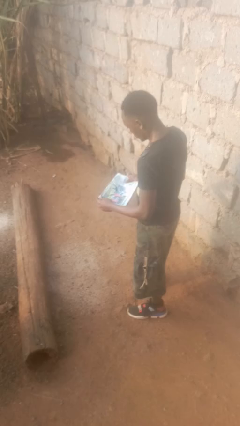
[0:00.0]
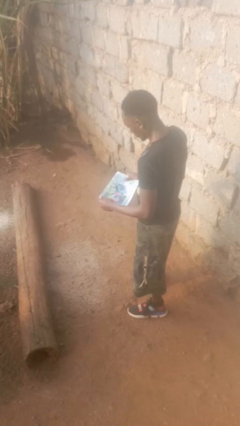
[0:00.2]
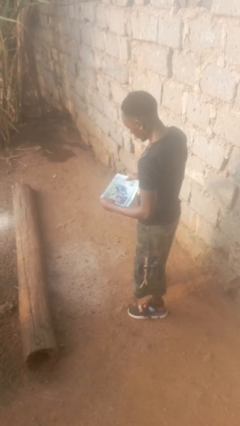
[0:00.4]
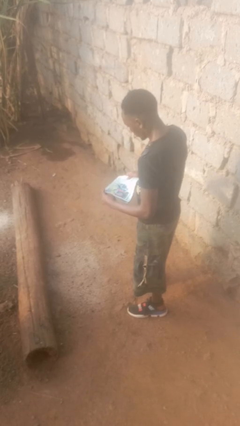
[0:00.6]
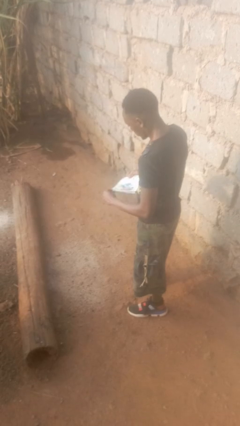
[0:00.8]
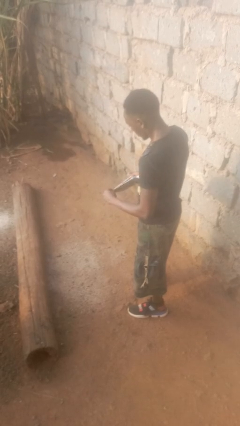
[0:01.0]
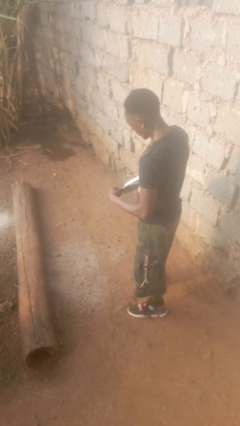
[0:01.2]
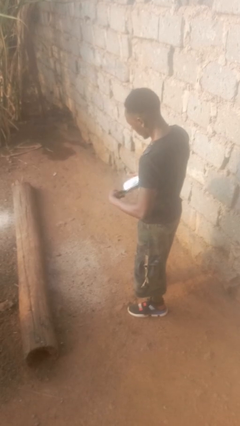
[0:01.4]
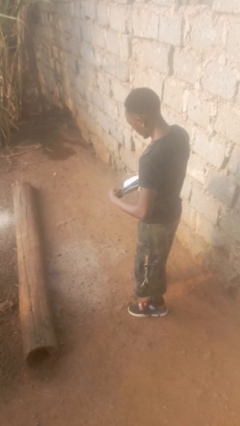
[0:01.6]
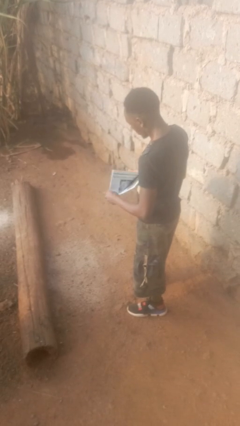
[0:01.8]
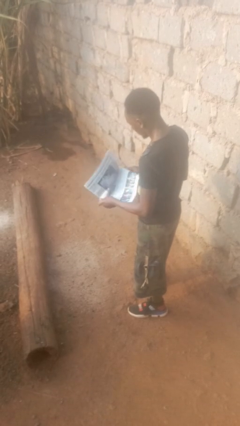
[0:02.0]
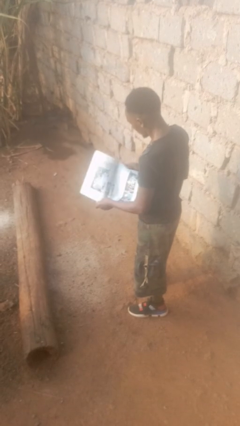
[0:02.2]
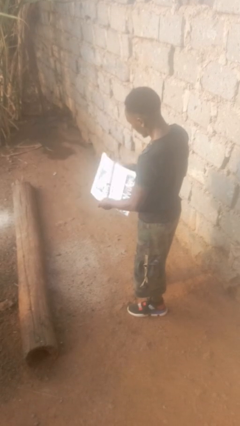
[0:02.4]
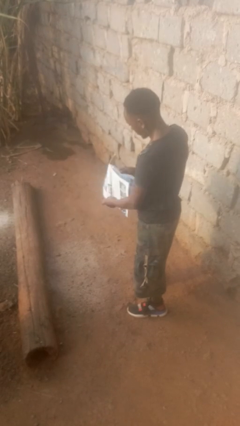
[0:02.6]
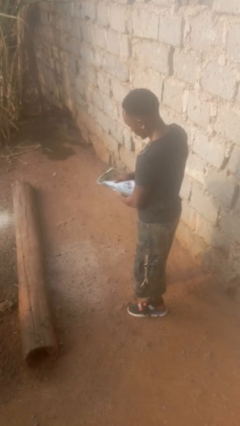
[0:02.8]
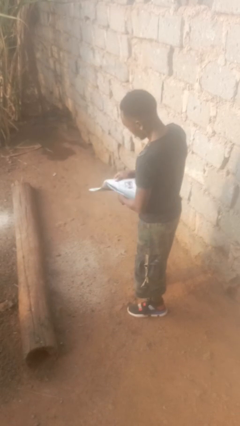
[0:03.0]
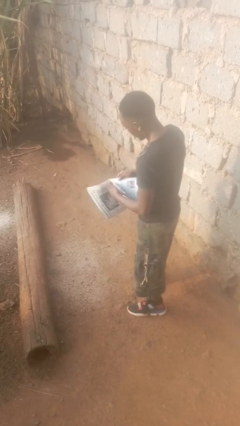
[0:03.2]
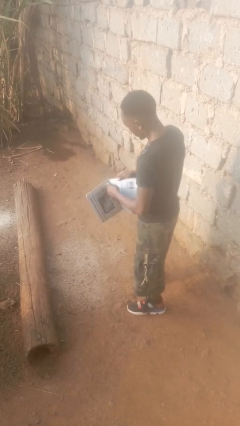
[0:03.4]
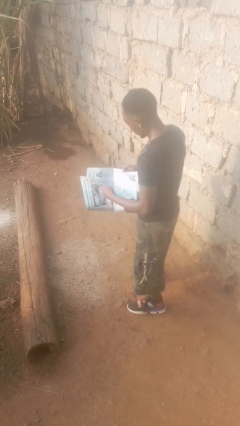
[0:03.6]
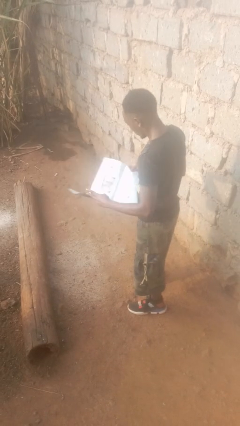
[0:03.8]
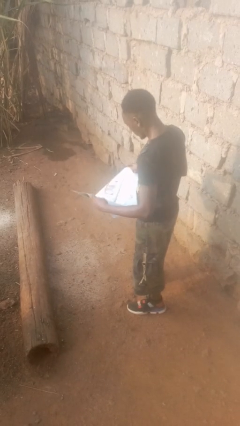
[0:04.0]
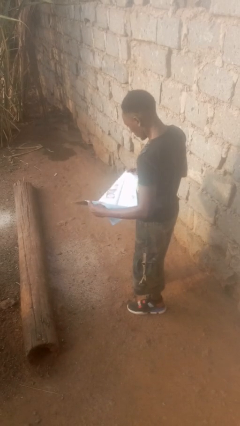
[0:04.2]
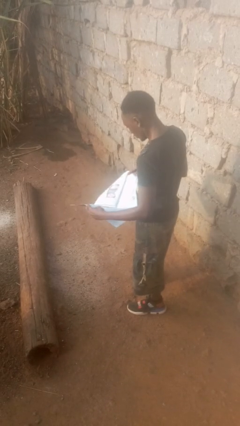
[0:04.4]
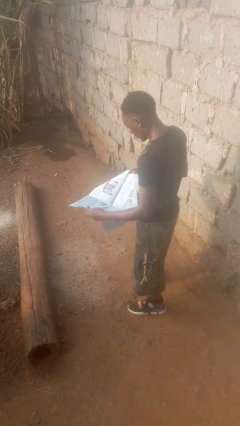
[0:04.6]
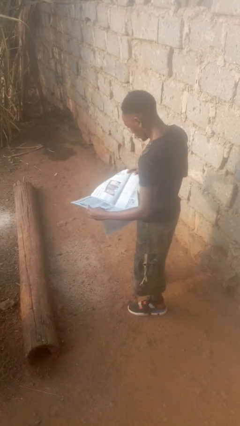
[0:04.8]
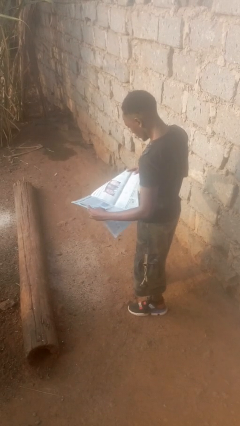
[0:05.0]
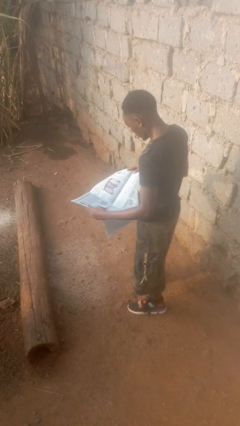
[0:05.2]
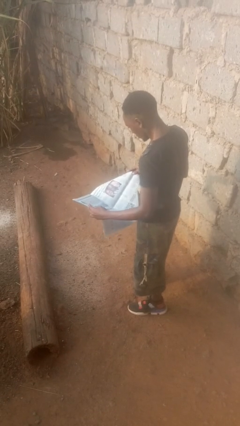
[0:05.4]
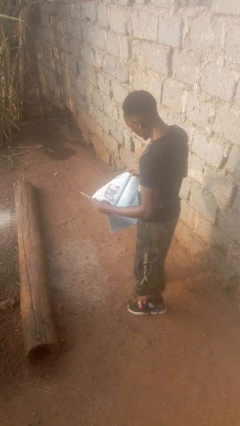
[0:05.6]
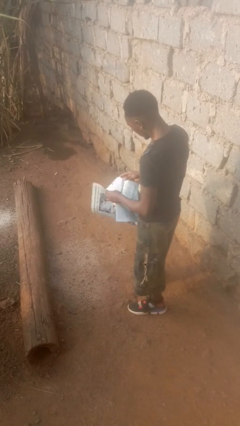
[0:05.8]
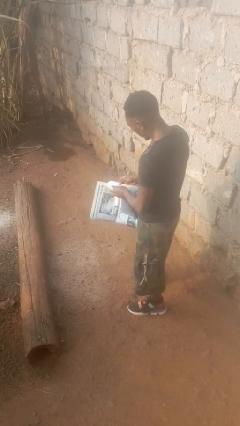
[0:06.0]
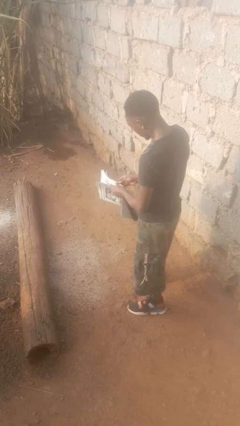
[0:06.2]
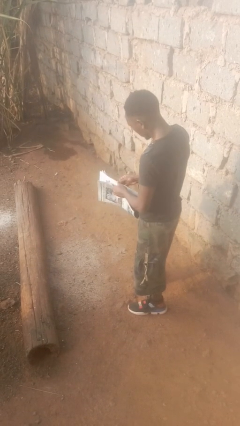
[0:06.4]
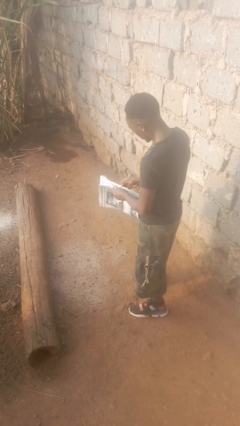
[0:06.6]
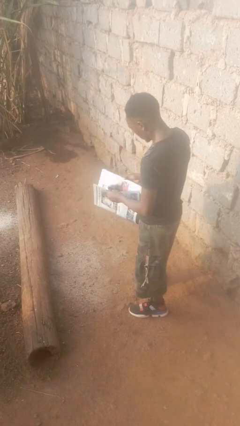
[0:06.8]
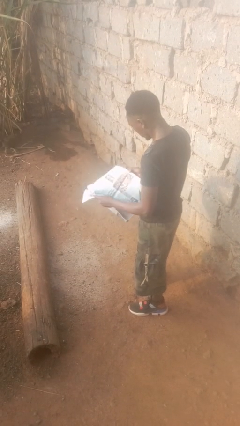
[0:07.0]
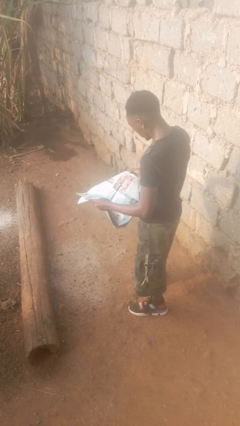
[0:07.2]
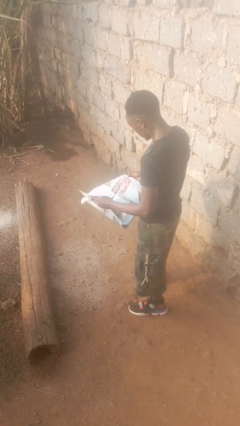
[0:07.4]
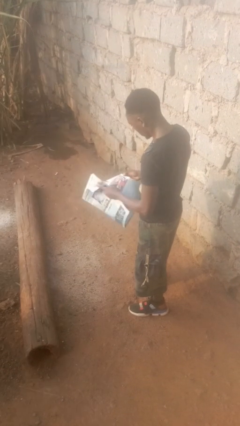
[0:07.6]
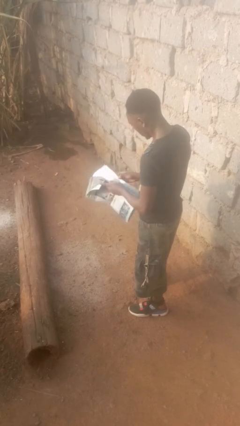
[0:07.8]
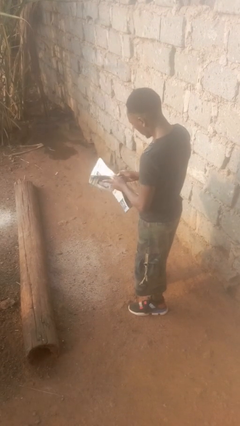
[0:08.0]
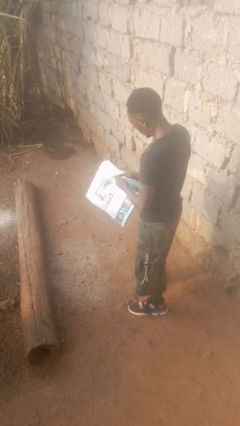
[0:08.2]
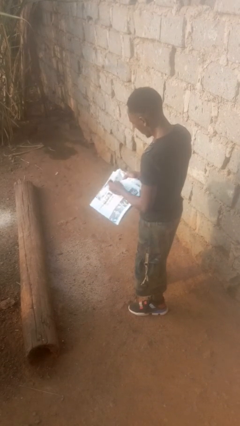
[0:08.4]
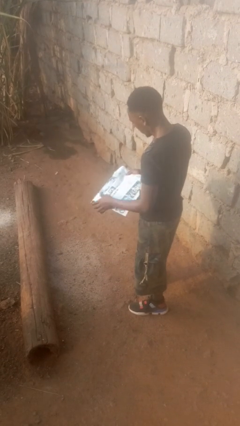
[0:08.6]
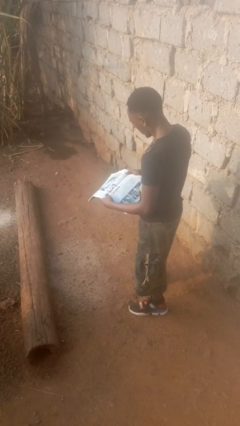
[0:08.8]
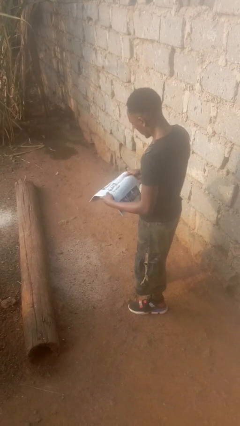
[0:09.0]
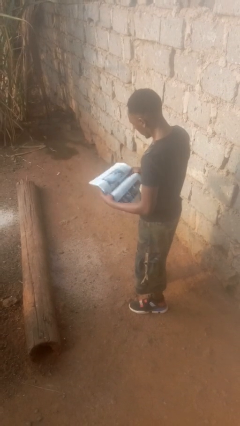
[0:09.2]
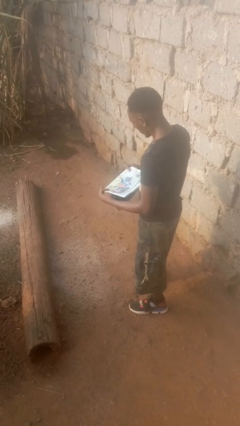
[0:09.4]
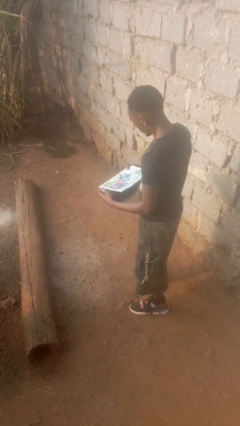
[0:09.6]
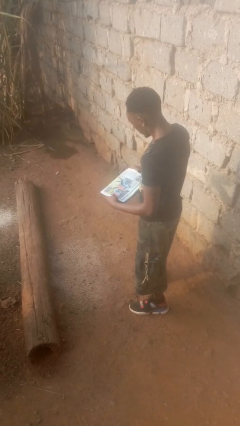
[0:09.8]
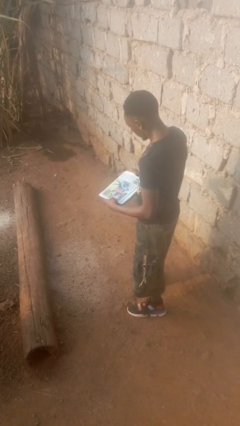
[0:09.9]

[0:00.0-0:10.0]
person reads newspaper

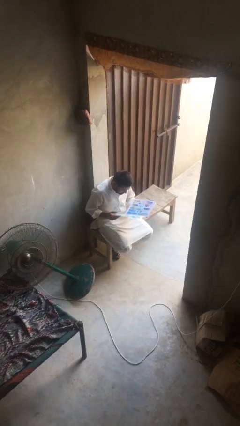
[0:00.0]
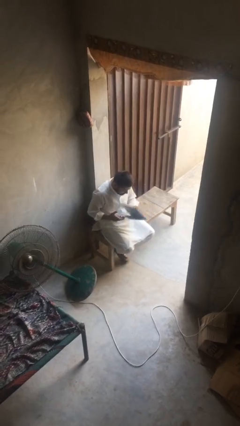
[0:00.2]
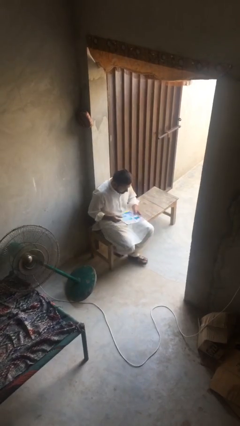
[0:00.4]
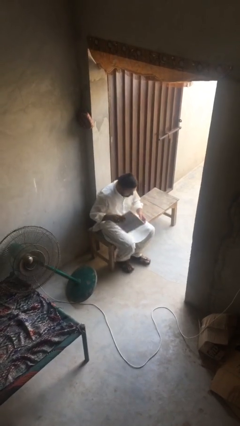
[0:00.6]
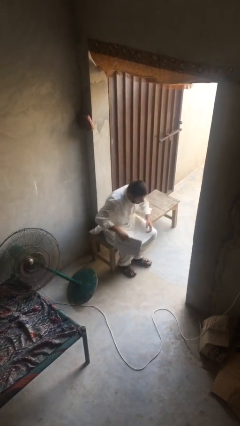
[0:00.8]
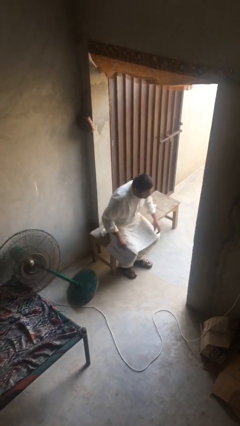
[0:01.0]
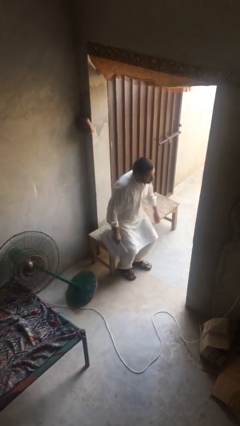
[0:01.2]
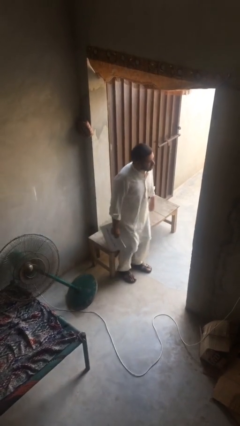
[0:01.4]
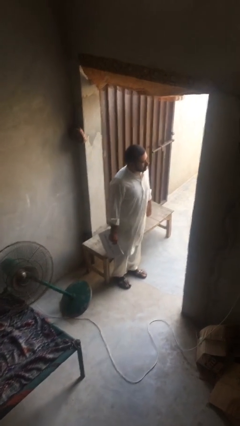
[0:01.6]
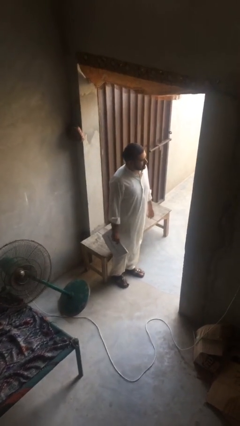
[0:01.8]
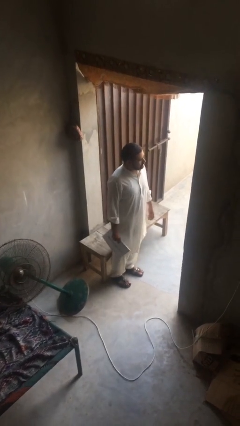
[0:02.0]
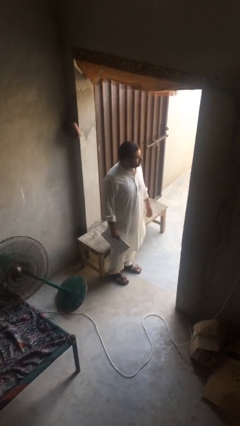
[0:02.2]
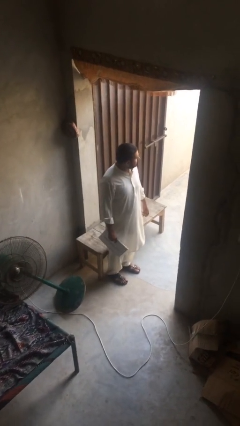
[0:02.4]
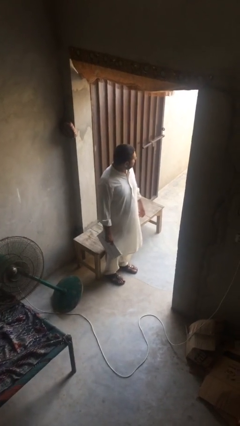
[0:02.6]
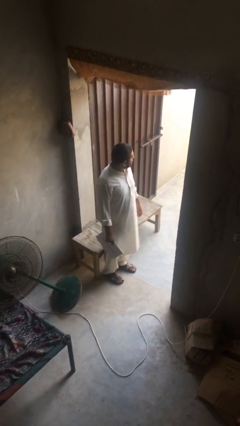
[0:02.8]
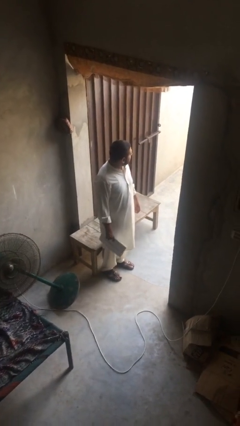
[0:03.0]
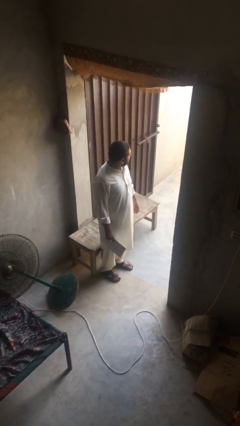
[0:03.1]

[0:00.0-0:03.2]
person stands up

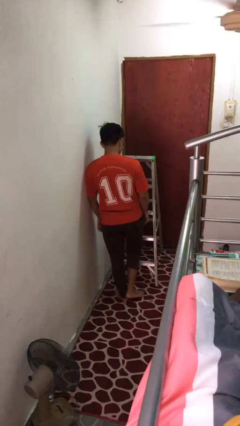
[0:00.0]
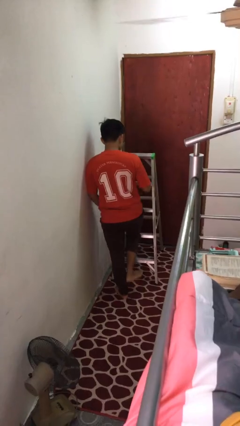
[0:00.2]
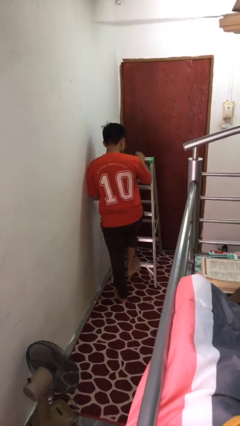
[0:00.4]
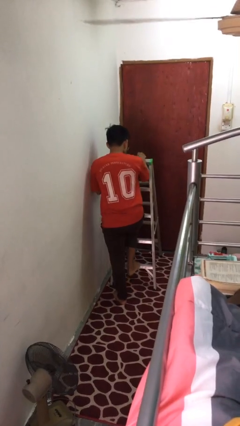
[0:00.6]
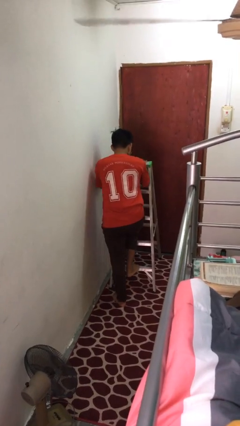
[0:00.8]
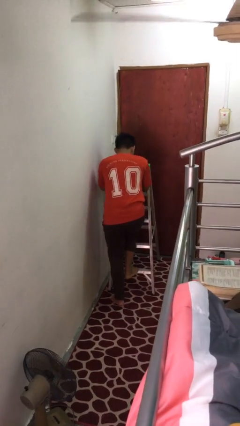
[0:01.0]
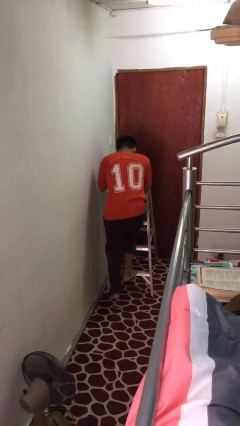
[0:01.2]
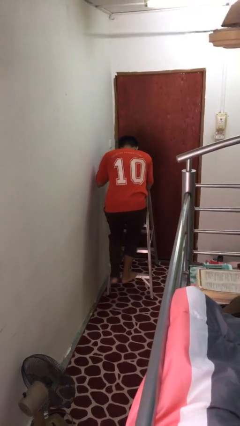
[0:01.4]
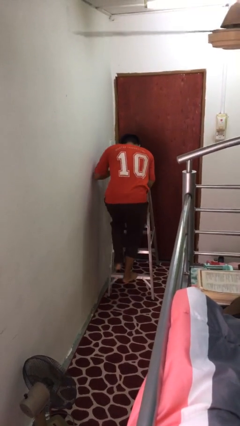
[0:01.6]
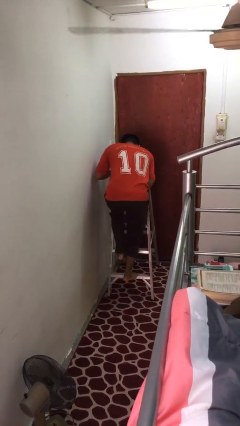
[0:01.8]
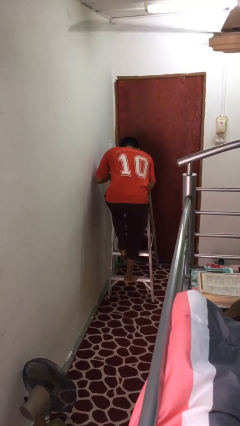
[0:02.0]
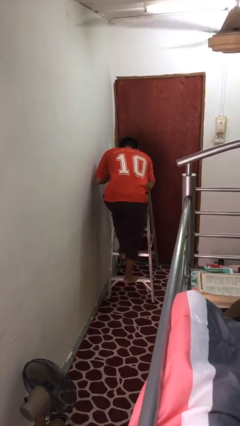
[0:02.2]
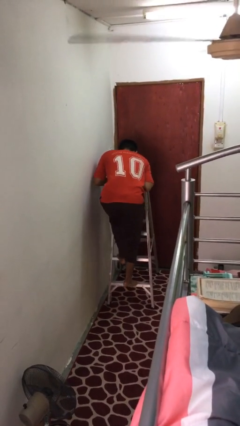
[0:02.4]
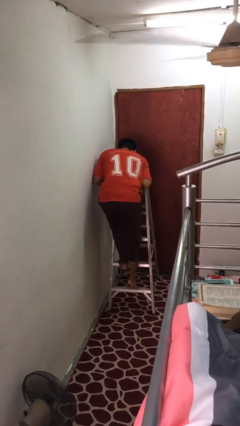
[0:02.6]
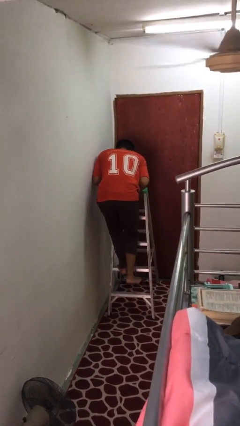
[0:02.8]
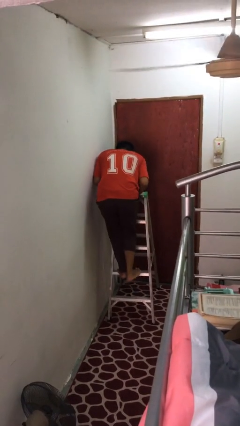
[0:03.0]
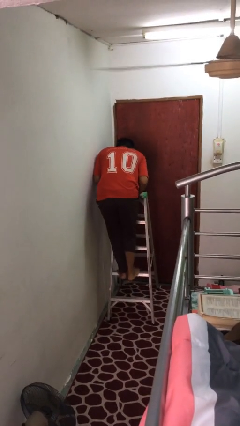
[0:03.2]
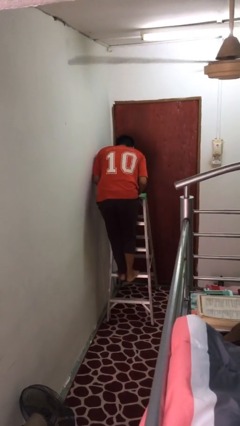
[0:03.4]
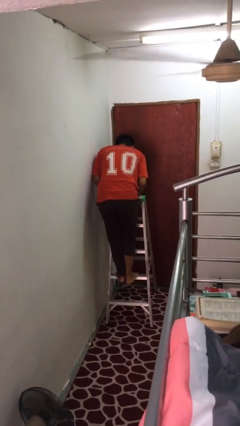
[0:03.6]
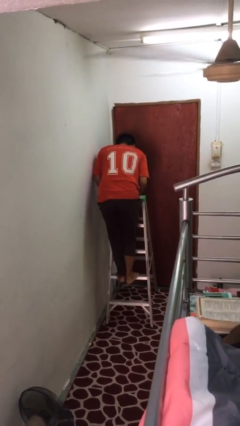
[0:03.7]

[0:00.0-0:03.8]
person climbs up ladder

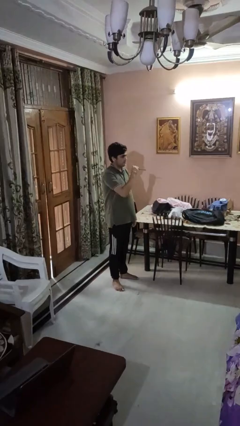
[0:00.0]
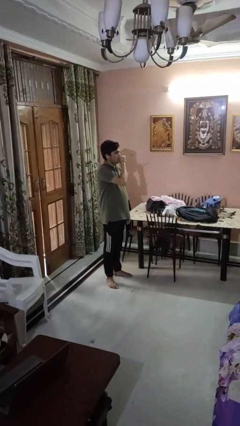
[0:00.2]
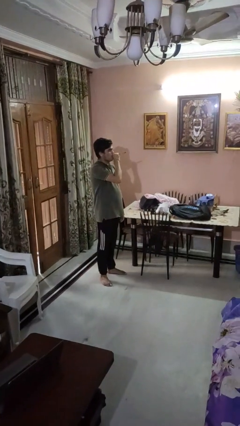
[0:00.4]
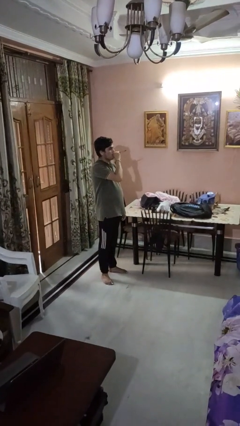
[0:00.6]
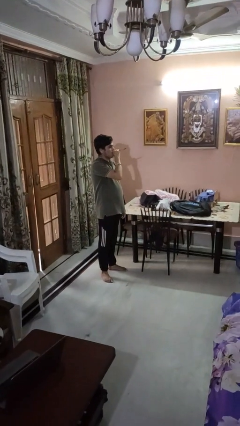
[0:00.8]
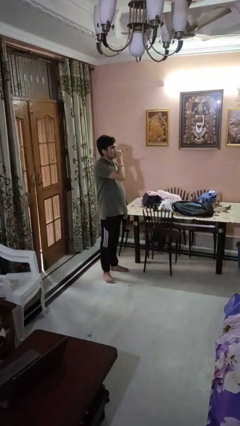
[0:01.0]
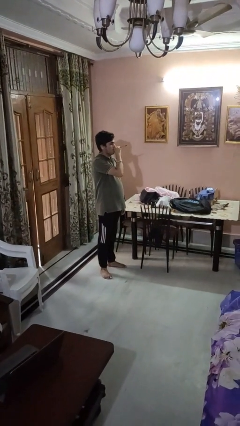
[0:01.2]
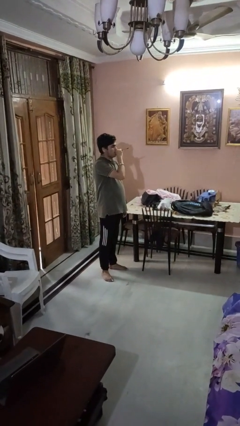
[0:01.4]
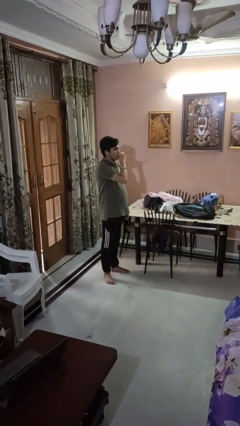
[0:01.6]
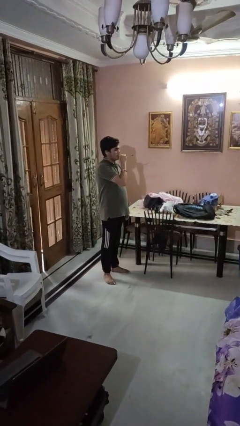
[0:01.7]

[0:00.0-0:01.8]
person vapes
